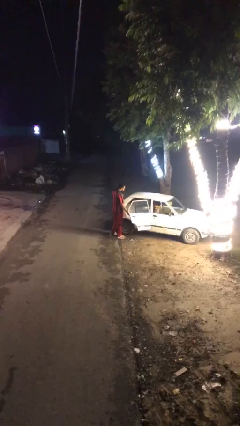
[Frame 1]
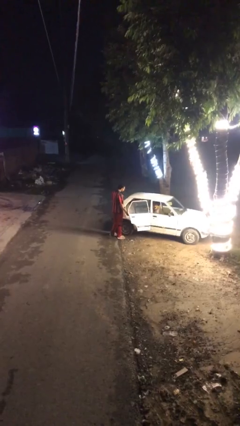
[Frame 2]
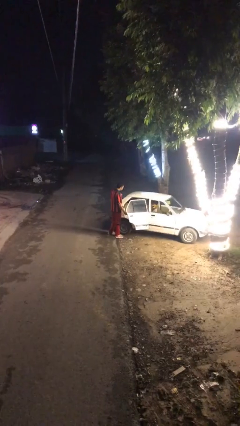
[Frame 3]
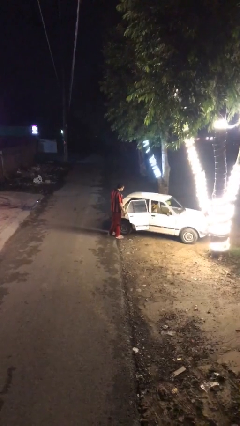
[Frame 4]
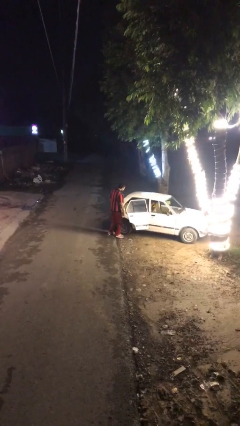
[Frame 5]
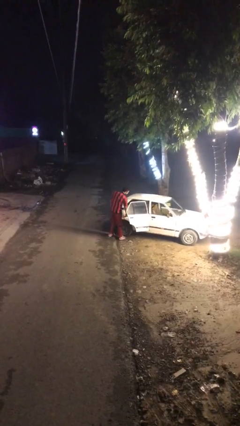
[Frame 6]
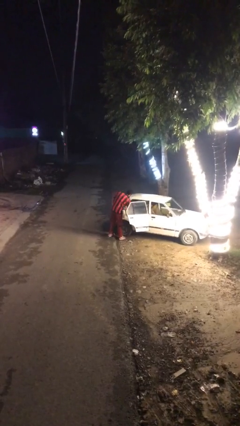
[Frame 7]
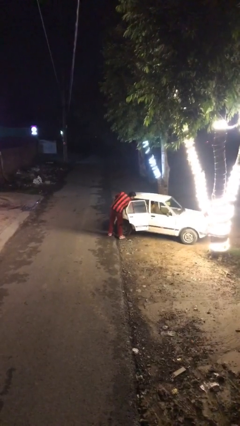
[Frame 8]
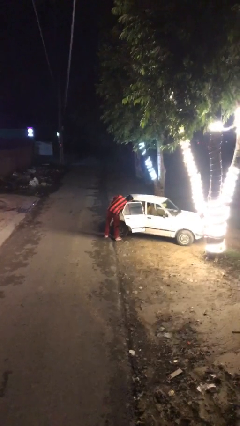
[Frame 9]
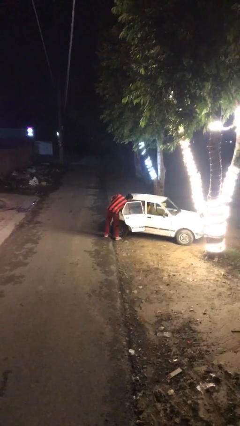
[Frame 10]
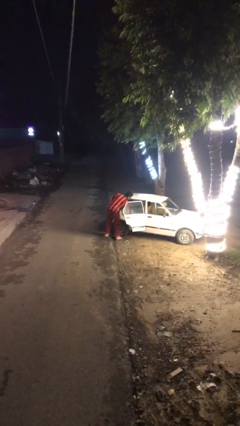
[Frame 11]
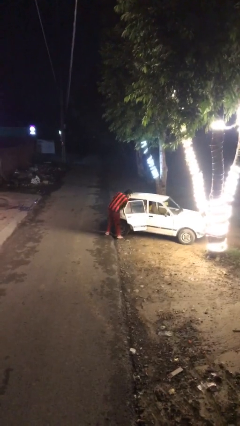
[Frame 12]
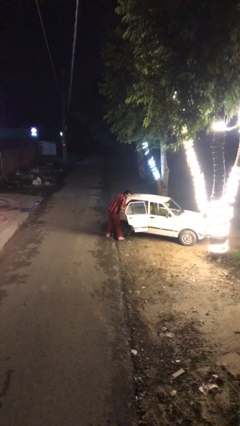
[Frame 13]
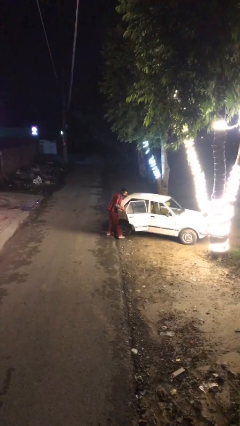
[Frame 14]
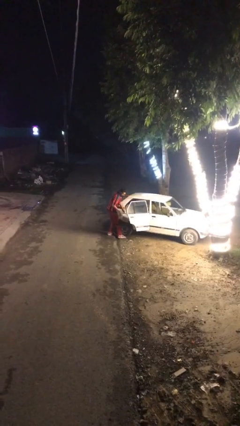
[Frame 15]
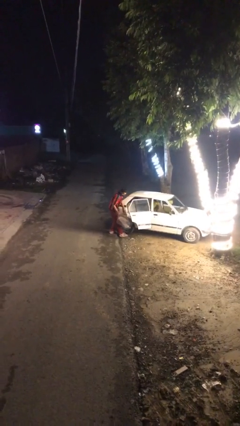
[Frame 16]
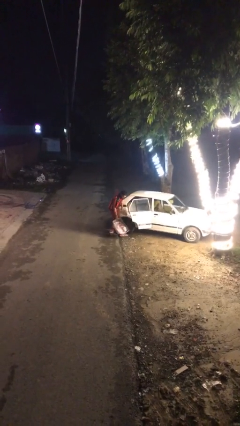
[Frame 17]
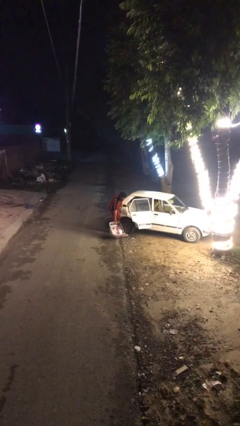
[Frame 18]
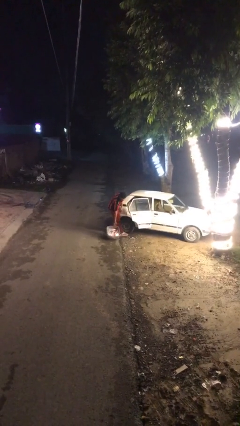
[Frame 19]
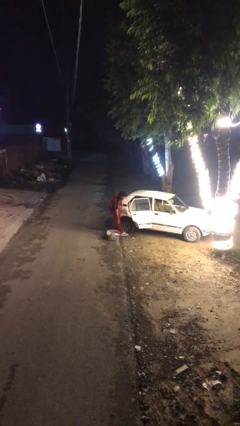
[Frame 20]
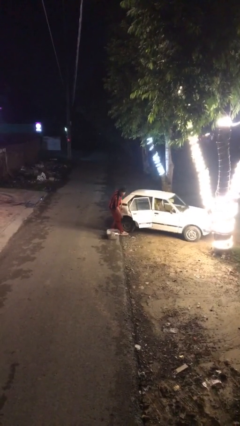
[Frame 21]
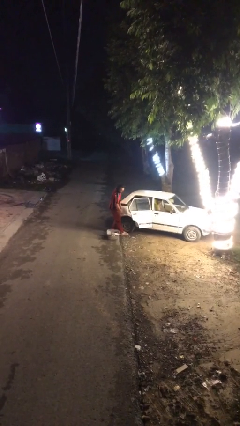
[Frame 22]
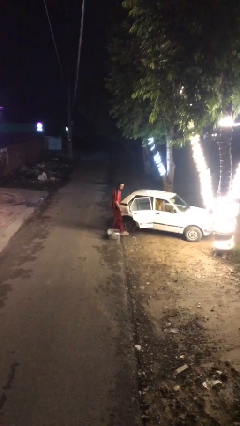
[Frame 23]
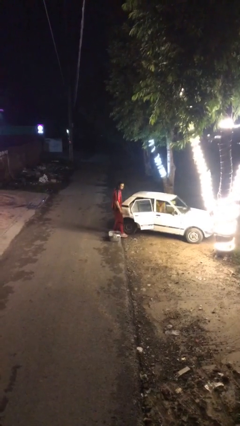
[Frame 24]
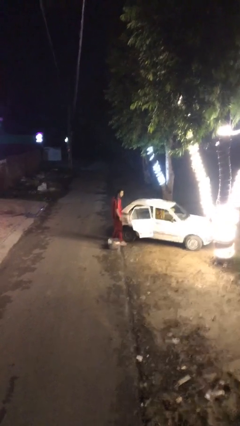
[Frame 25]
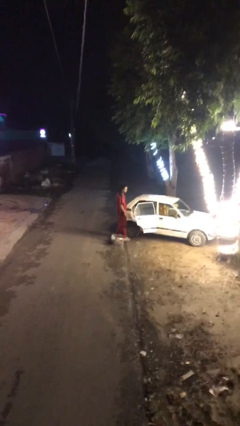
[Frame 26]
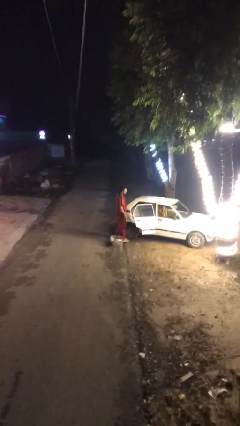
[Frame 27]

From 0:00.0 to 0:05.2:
person unloads car

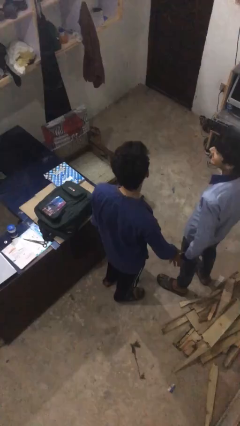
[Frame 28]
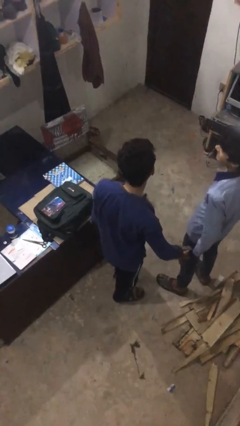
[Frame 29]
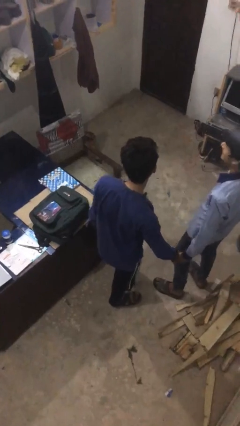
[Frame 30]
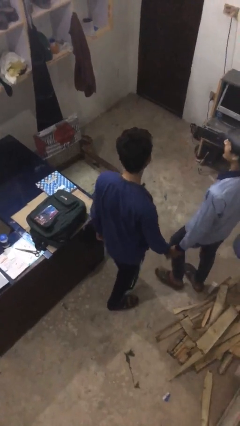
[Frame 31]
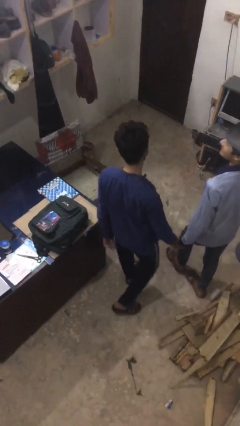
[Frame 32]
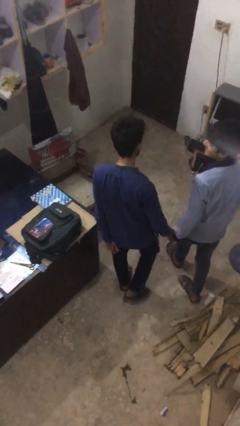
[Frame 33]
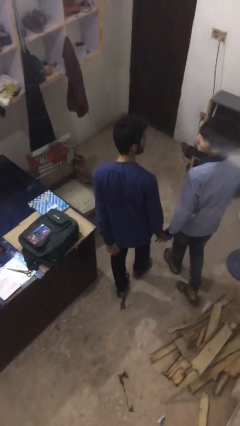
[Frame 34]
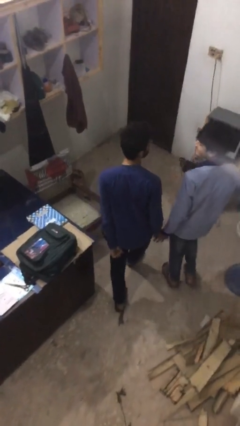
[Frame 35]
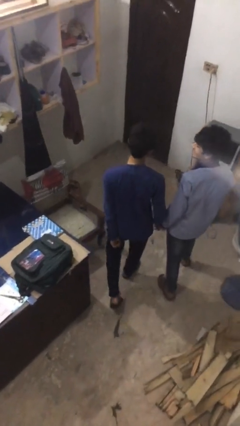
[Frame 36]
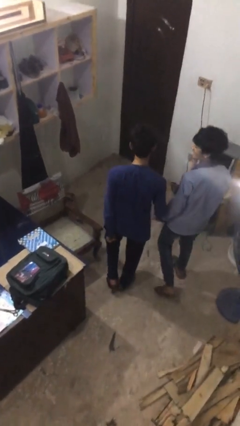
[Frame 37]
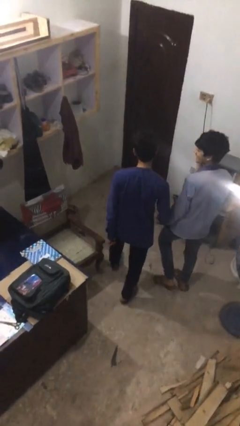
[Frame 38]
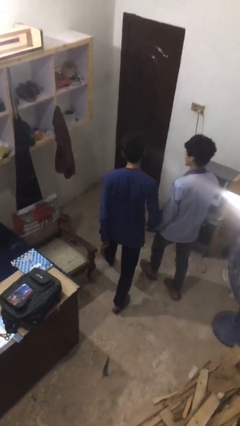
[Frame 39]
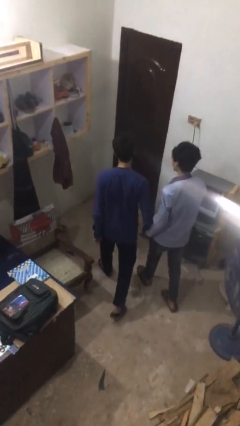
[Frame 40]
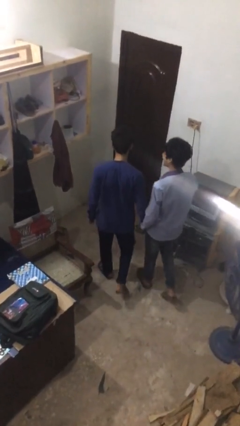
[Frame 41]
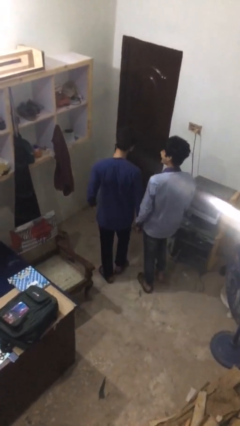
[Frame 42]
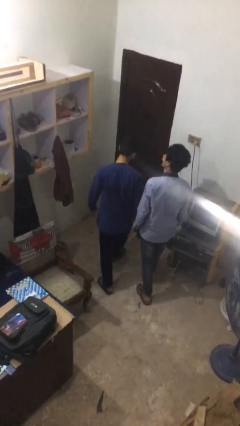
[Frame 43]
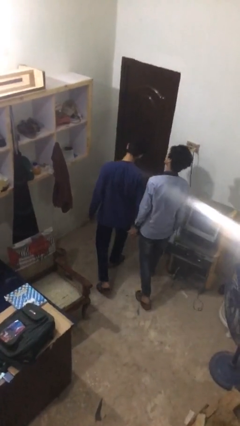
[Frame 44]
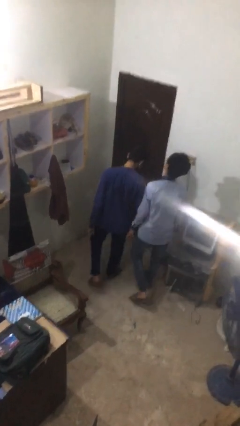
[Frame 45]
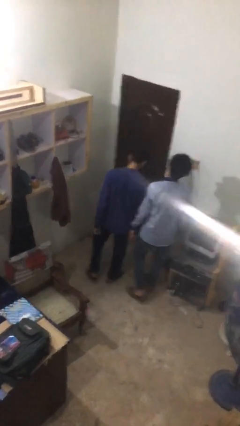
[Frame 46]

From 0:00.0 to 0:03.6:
person holds hand

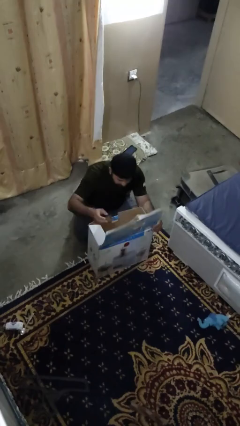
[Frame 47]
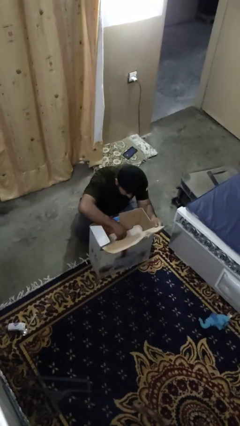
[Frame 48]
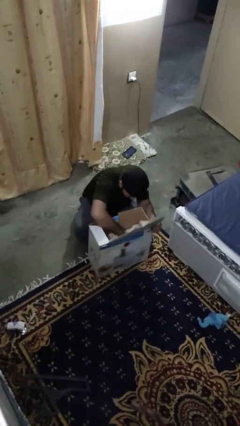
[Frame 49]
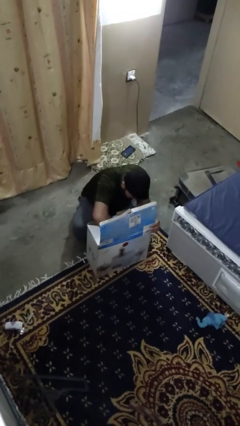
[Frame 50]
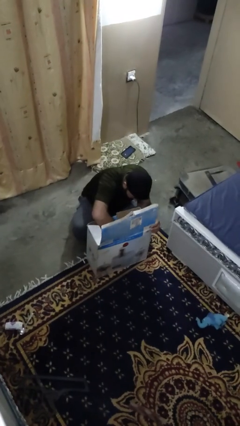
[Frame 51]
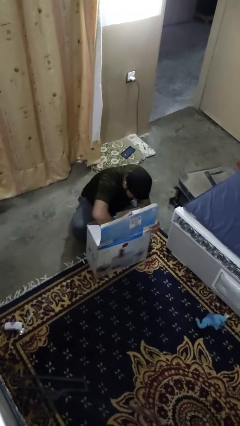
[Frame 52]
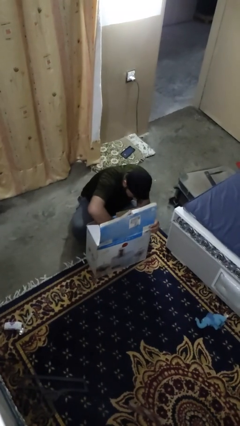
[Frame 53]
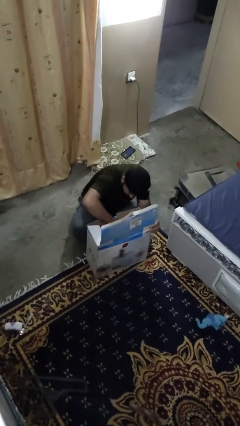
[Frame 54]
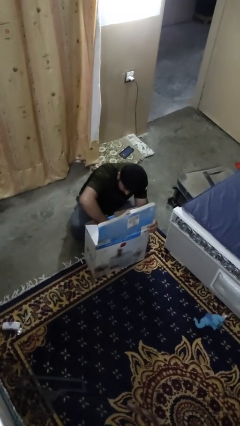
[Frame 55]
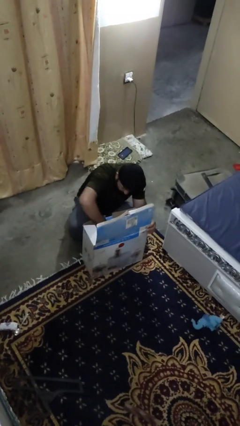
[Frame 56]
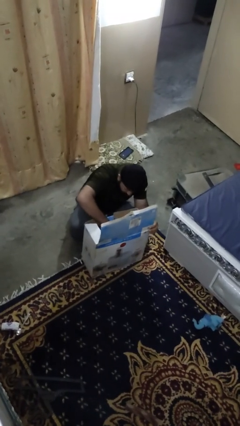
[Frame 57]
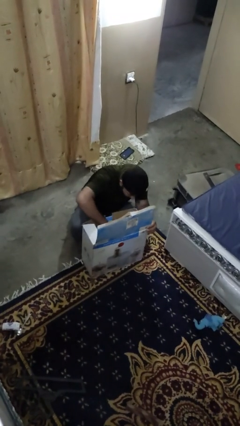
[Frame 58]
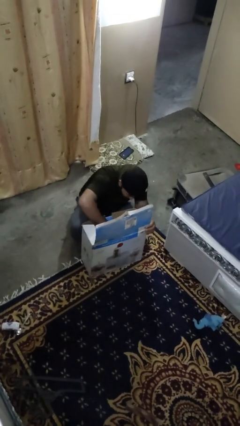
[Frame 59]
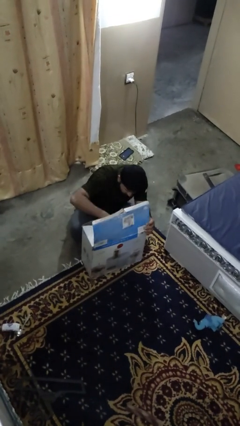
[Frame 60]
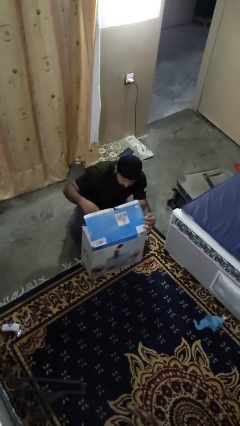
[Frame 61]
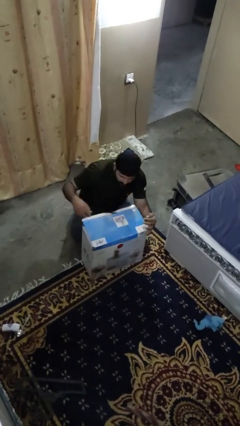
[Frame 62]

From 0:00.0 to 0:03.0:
person searches in box

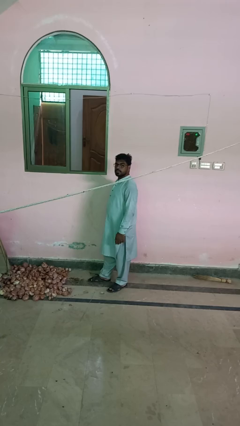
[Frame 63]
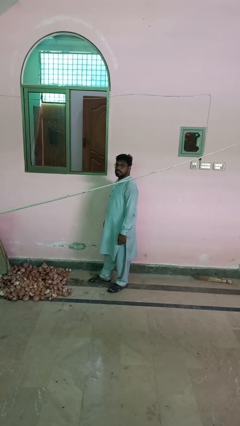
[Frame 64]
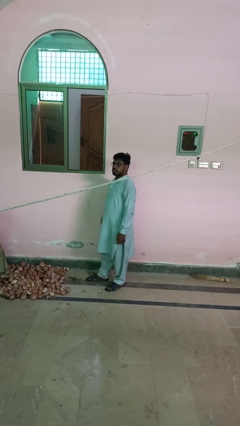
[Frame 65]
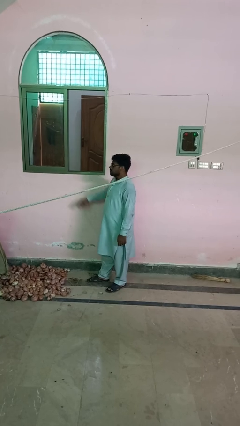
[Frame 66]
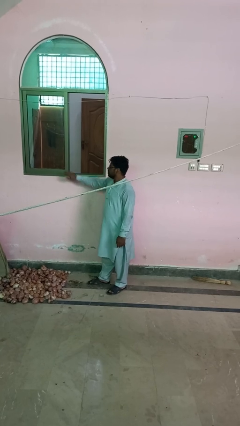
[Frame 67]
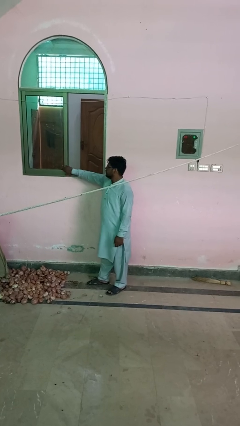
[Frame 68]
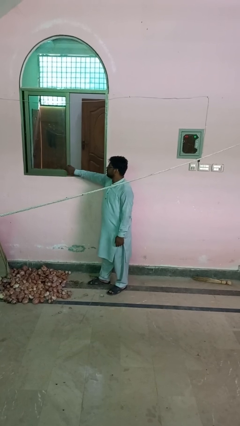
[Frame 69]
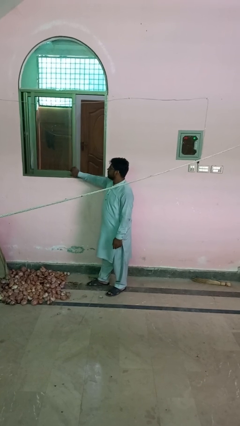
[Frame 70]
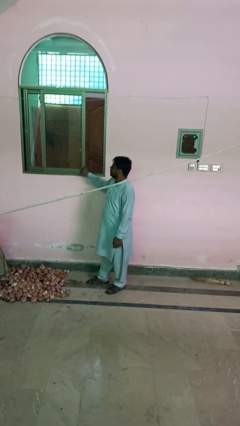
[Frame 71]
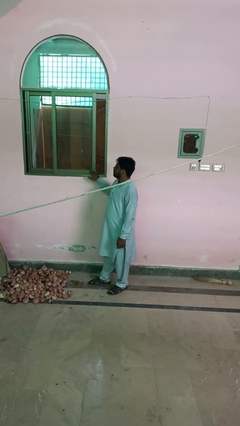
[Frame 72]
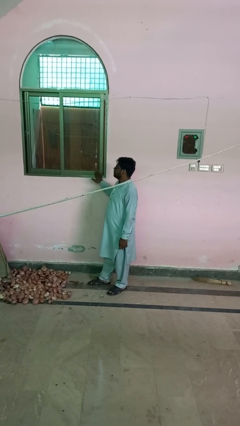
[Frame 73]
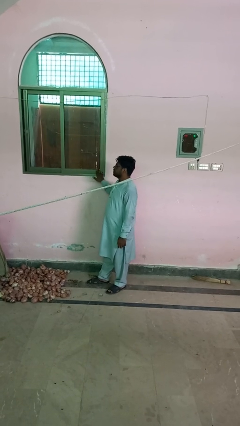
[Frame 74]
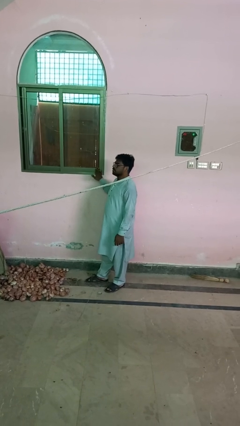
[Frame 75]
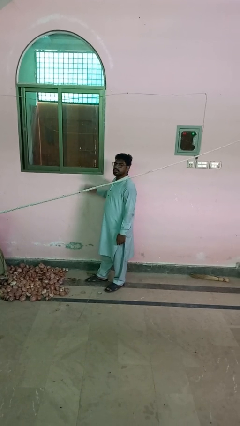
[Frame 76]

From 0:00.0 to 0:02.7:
person closes sliding door

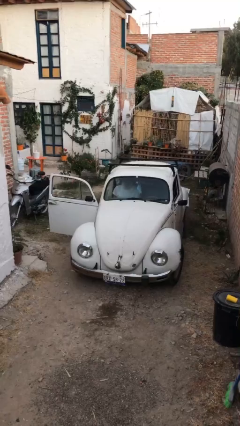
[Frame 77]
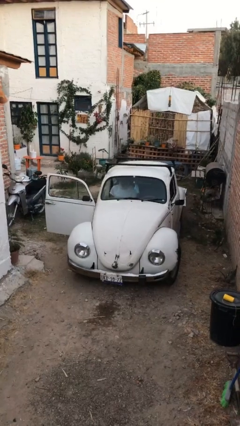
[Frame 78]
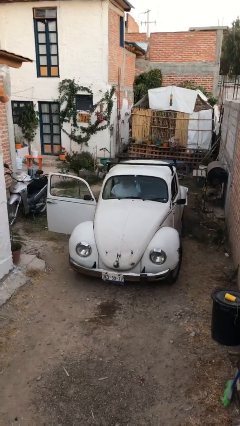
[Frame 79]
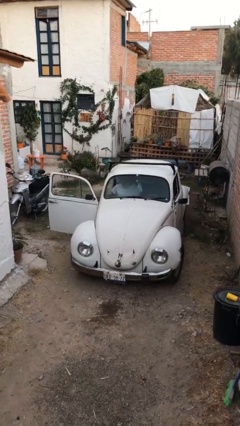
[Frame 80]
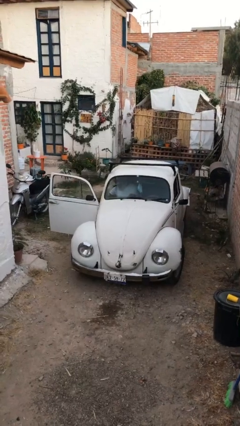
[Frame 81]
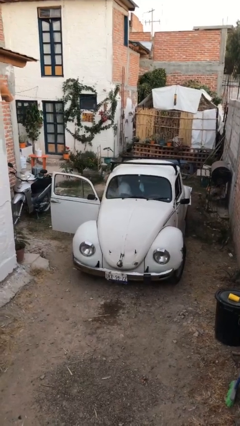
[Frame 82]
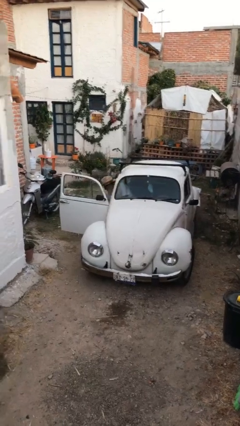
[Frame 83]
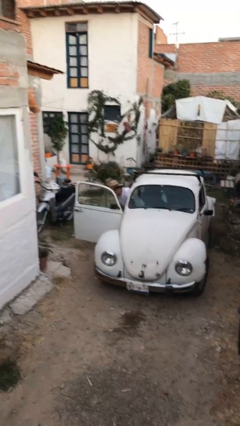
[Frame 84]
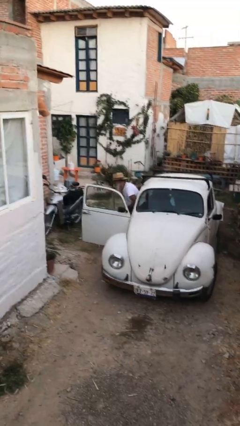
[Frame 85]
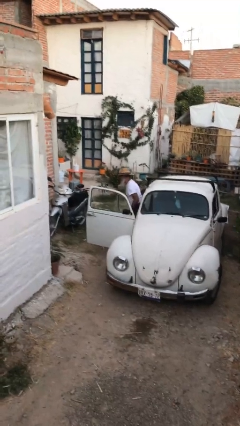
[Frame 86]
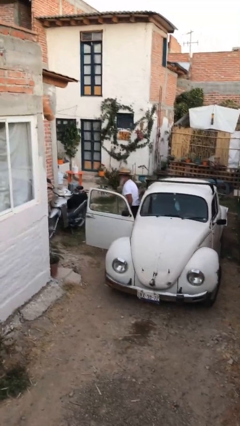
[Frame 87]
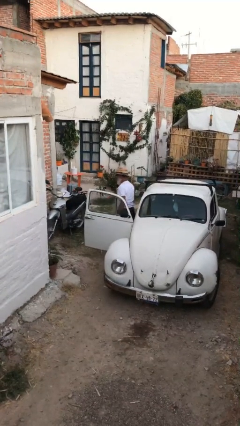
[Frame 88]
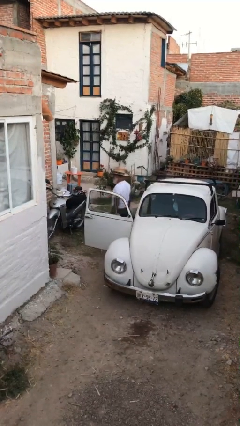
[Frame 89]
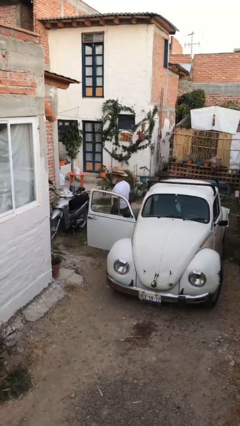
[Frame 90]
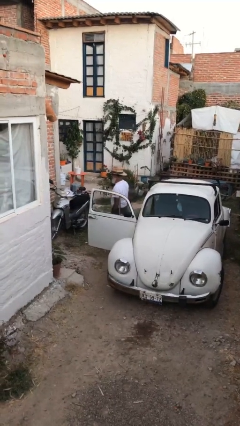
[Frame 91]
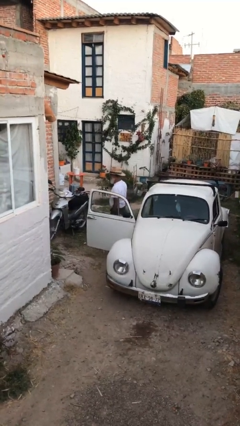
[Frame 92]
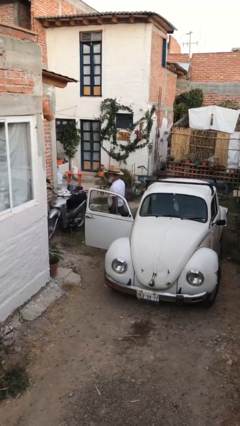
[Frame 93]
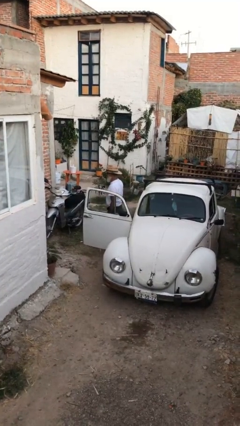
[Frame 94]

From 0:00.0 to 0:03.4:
person exits car
